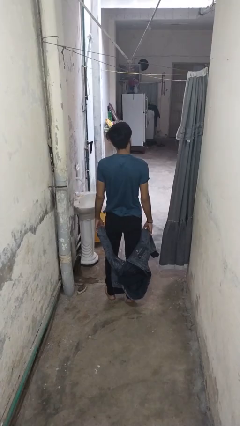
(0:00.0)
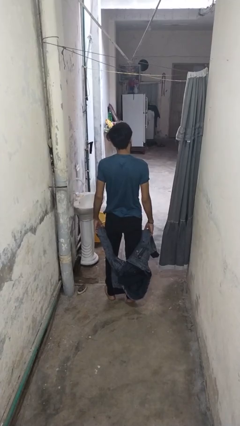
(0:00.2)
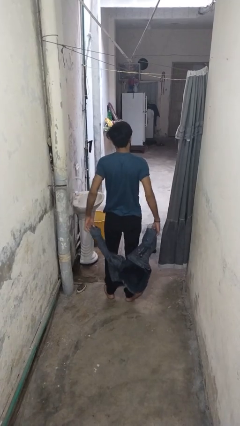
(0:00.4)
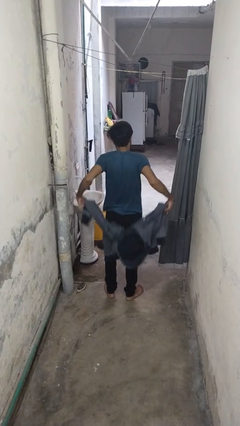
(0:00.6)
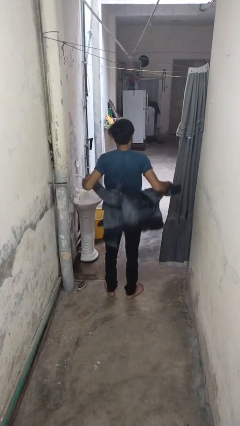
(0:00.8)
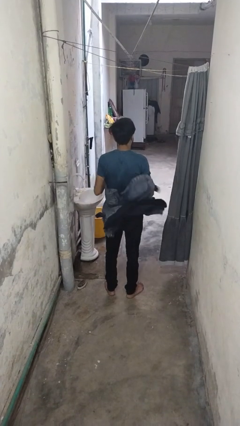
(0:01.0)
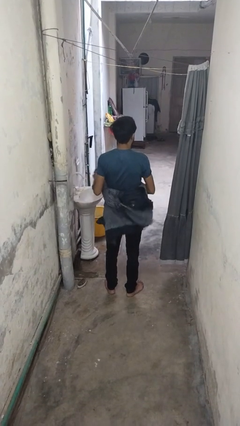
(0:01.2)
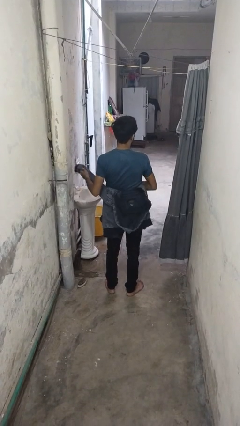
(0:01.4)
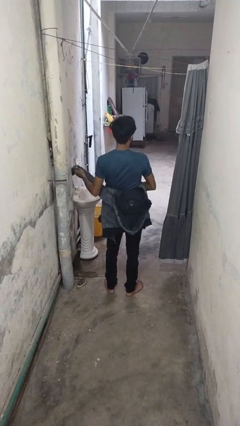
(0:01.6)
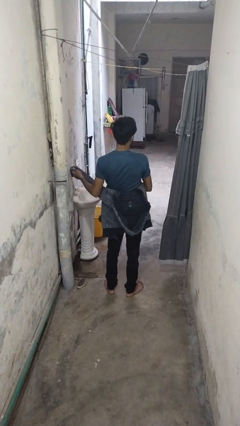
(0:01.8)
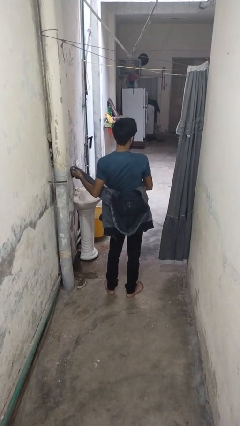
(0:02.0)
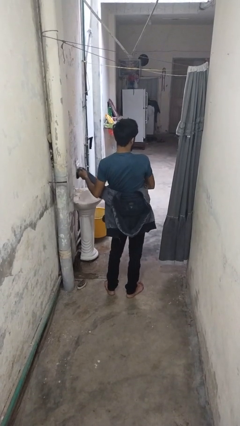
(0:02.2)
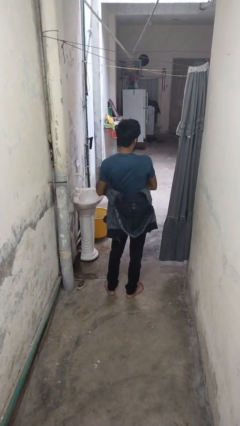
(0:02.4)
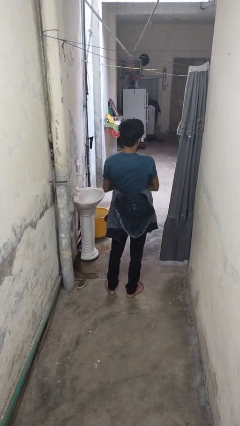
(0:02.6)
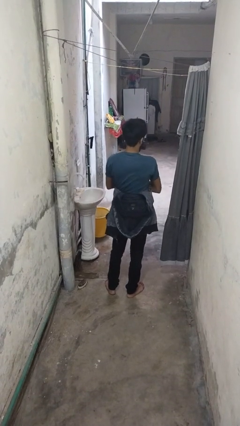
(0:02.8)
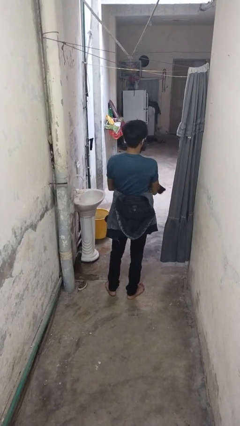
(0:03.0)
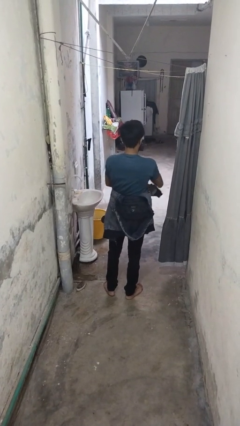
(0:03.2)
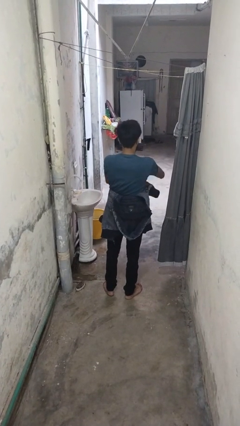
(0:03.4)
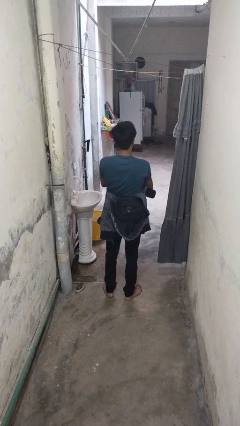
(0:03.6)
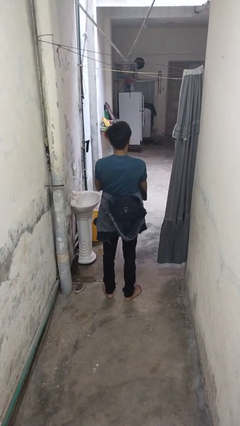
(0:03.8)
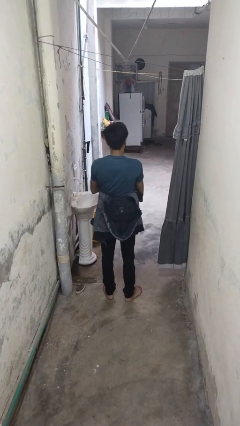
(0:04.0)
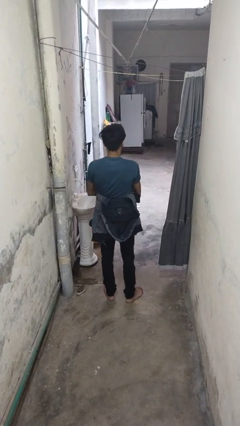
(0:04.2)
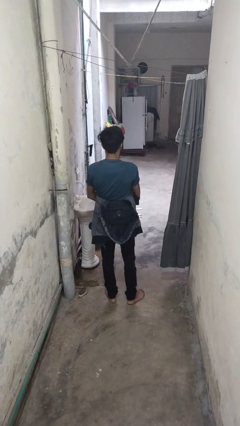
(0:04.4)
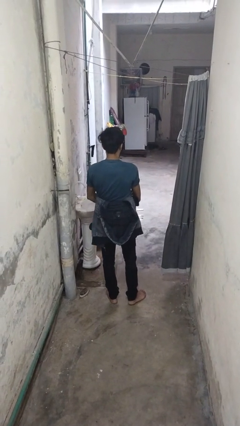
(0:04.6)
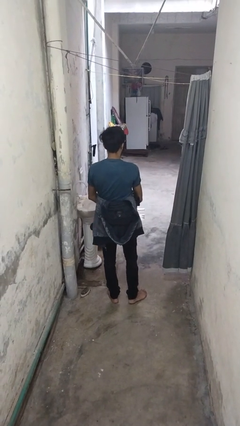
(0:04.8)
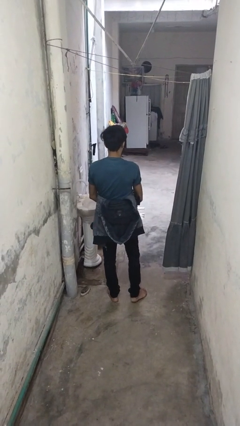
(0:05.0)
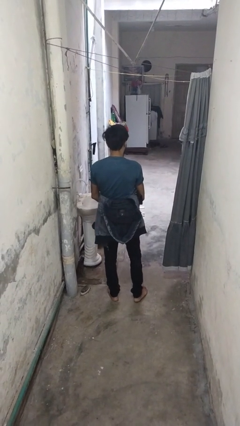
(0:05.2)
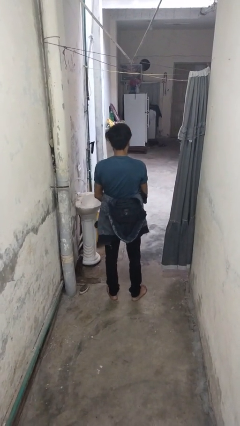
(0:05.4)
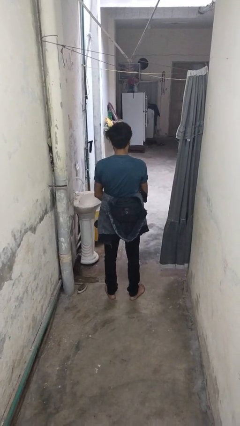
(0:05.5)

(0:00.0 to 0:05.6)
person ties jacket around waist

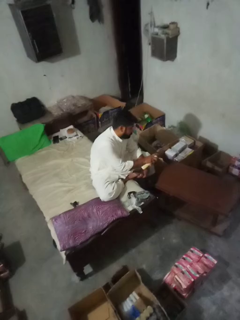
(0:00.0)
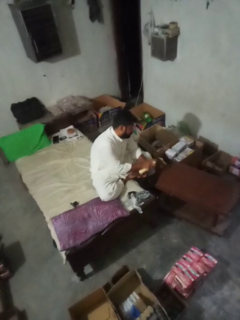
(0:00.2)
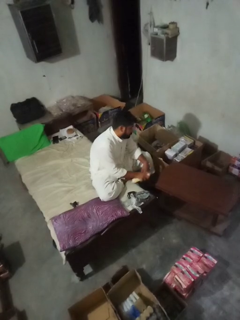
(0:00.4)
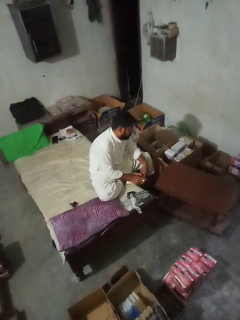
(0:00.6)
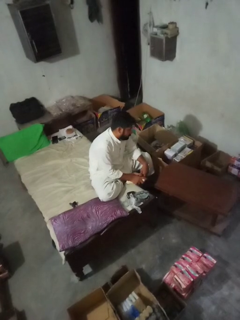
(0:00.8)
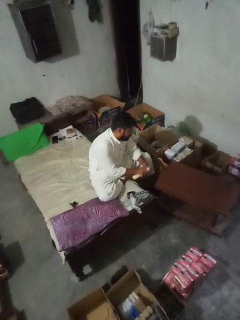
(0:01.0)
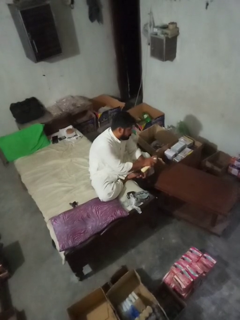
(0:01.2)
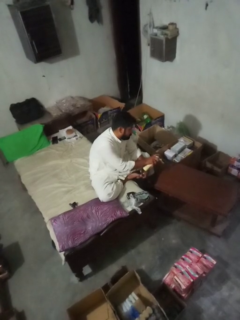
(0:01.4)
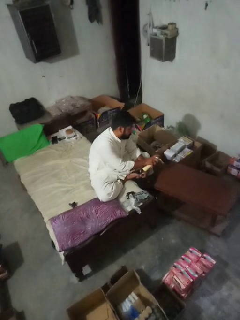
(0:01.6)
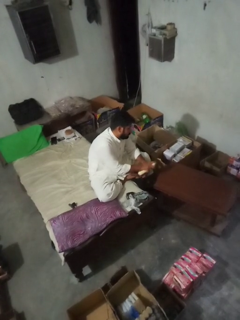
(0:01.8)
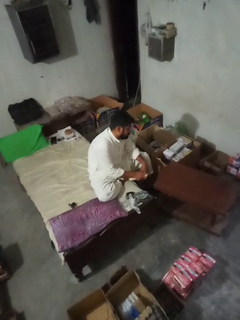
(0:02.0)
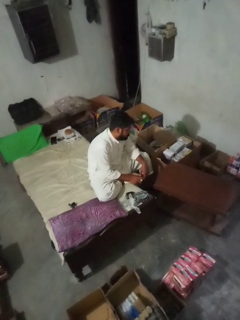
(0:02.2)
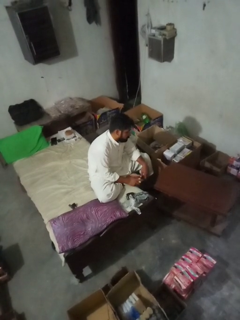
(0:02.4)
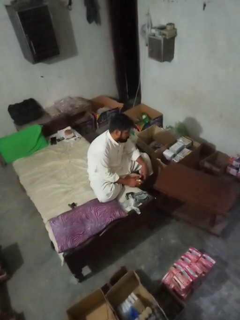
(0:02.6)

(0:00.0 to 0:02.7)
person sprays from bottle

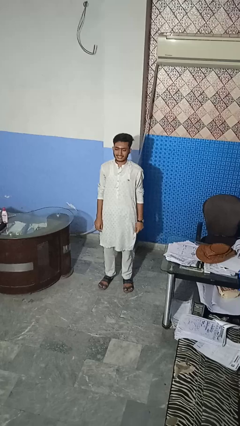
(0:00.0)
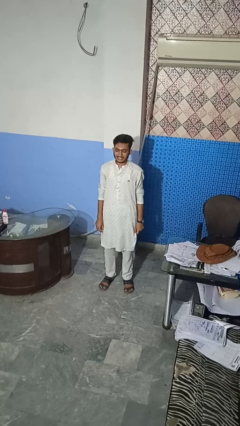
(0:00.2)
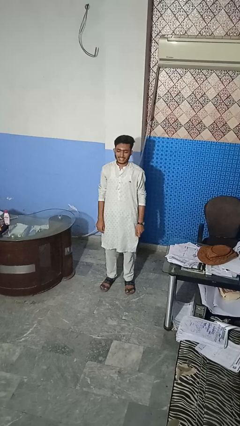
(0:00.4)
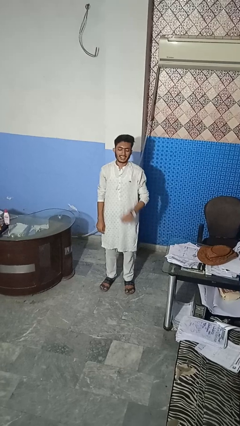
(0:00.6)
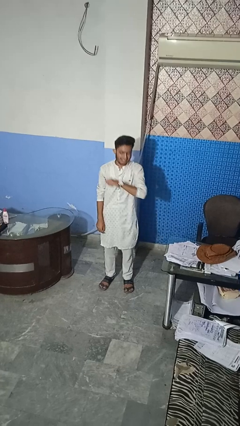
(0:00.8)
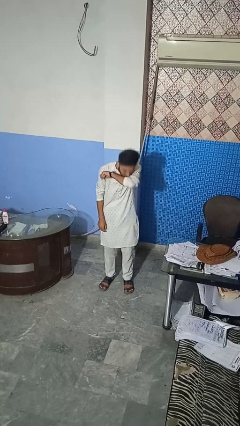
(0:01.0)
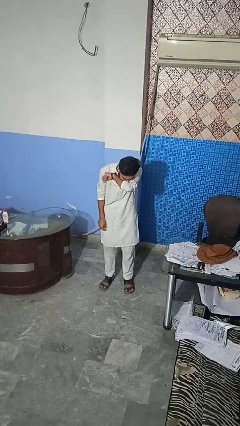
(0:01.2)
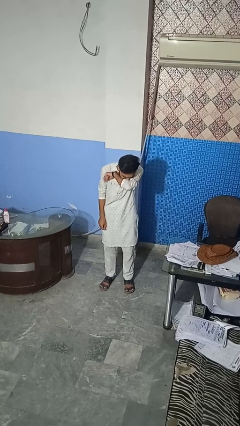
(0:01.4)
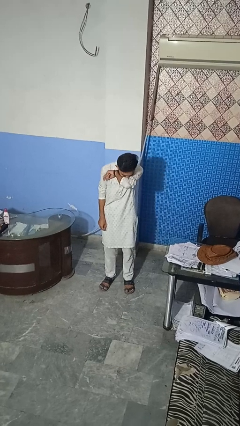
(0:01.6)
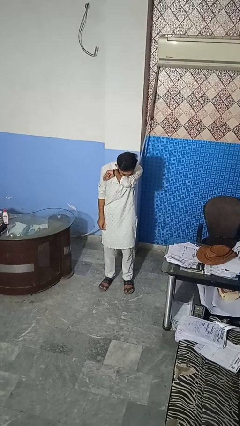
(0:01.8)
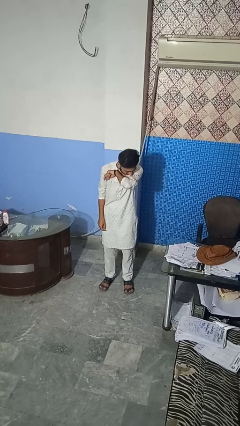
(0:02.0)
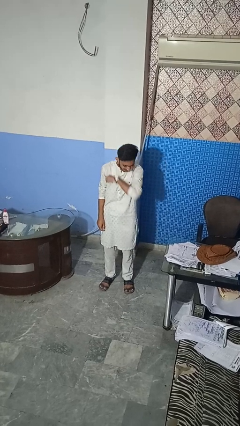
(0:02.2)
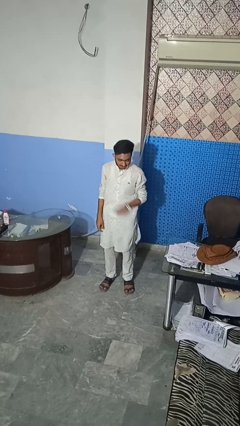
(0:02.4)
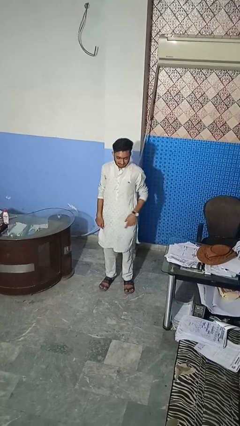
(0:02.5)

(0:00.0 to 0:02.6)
person sneezes into arm

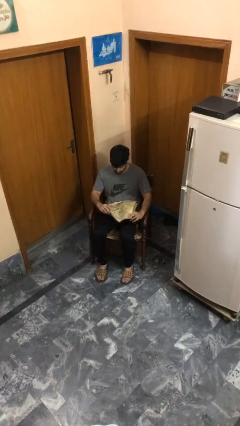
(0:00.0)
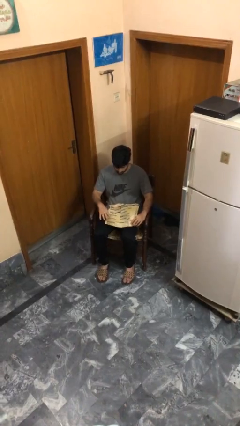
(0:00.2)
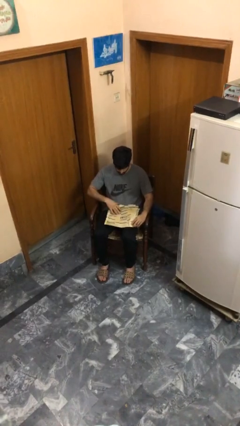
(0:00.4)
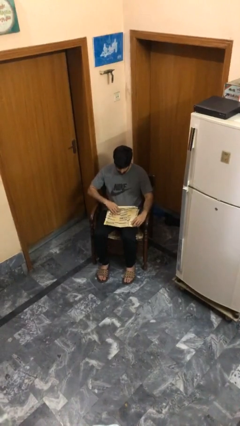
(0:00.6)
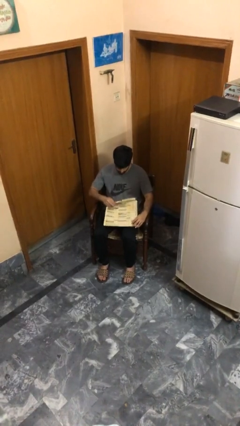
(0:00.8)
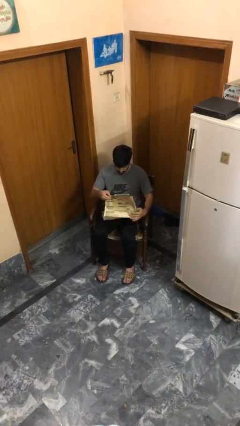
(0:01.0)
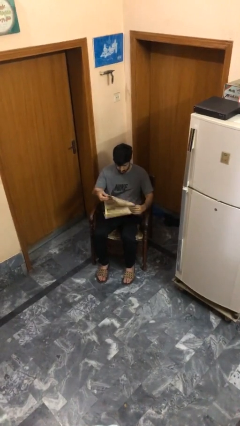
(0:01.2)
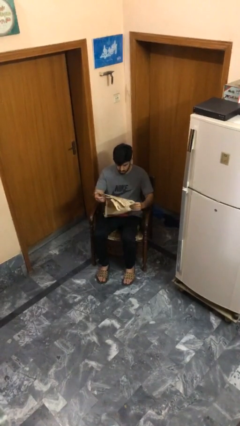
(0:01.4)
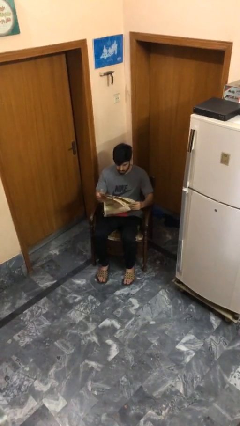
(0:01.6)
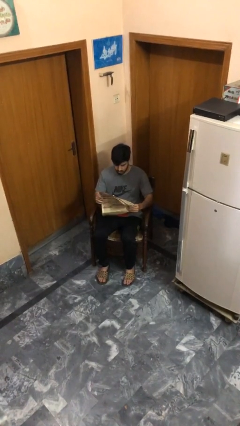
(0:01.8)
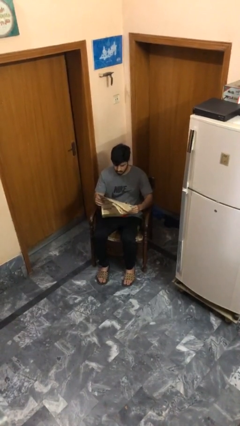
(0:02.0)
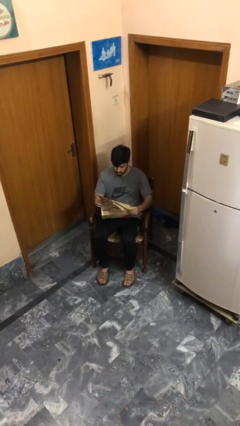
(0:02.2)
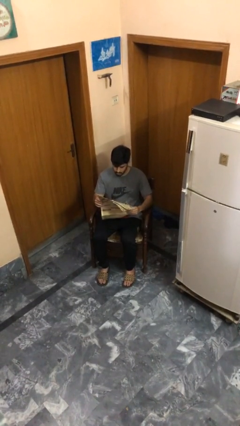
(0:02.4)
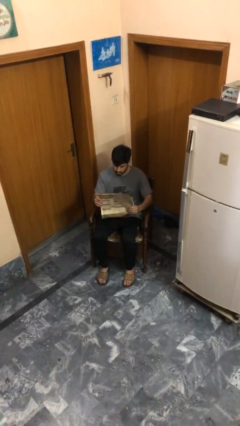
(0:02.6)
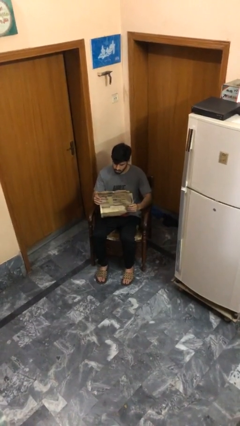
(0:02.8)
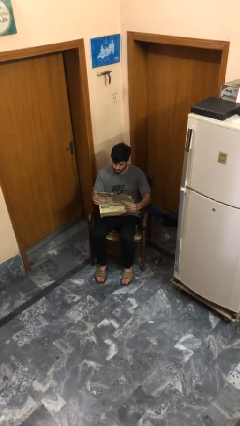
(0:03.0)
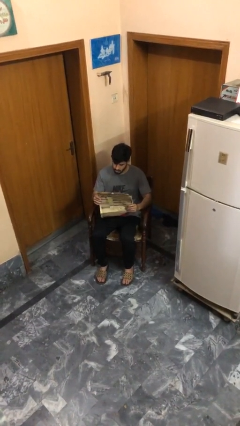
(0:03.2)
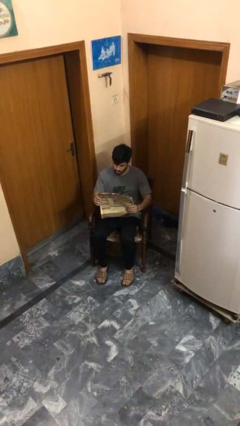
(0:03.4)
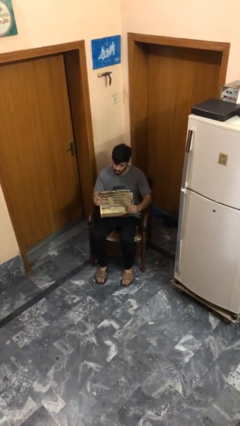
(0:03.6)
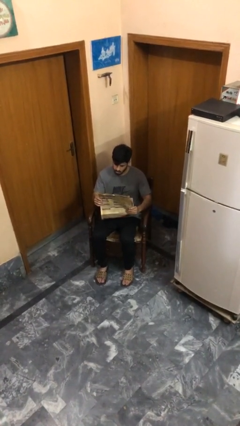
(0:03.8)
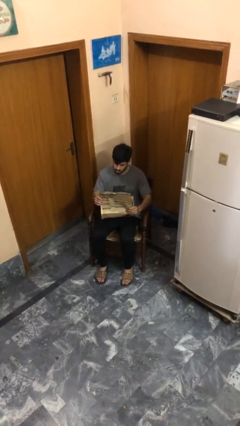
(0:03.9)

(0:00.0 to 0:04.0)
person reads newspaper

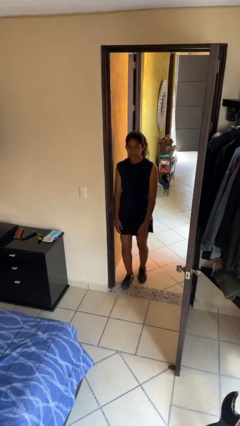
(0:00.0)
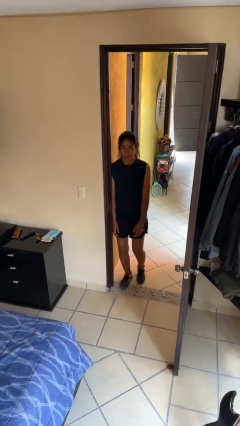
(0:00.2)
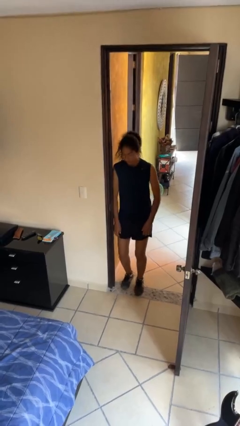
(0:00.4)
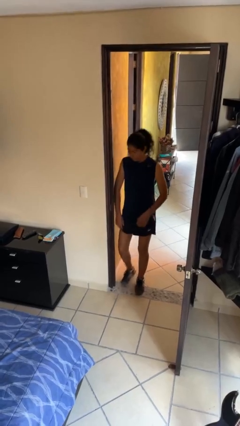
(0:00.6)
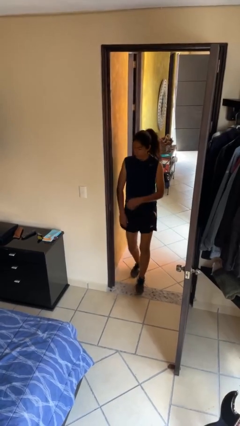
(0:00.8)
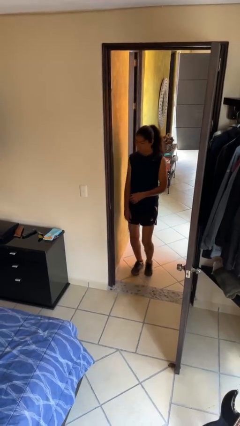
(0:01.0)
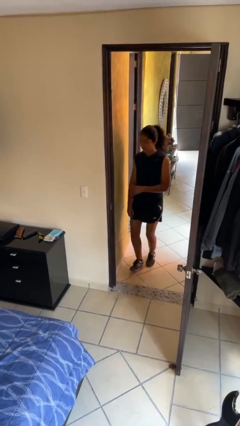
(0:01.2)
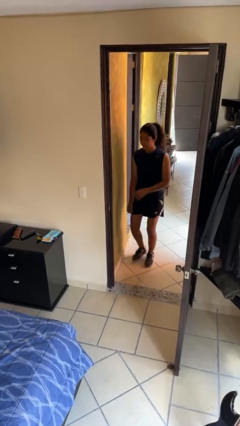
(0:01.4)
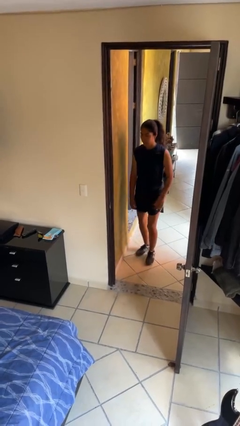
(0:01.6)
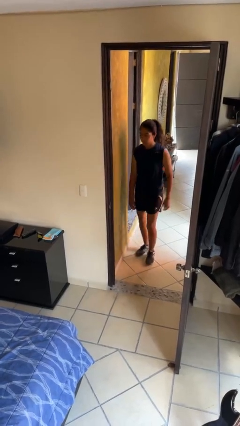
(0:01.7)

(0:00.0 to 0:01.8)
person bumps into wall

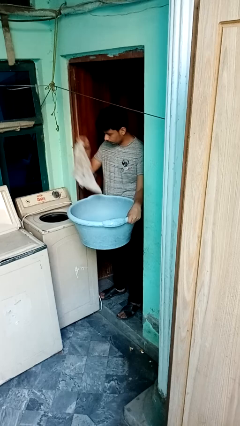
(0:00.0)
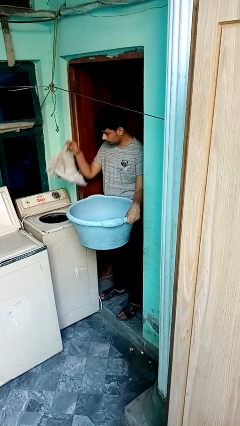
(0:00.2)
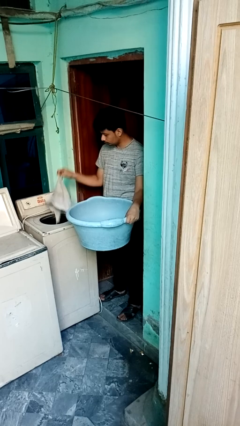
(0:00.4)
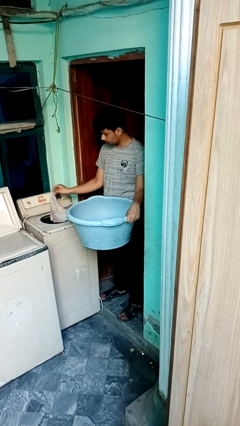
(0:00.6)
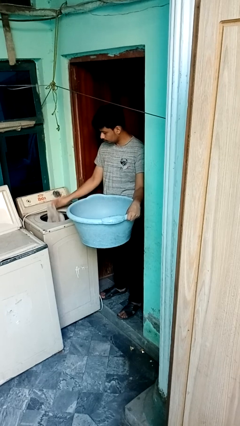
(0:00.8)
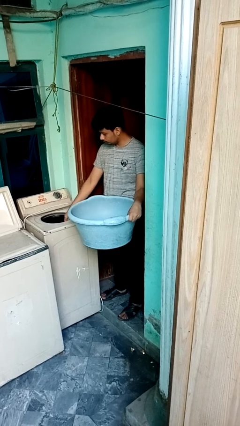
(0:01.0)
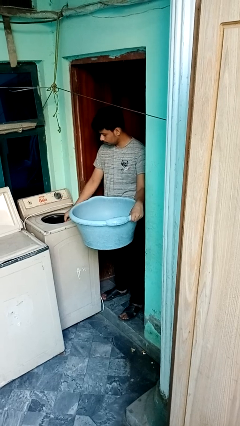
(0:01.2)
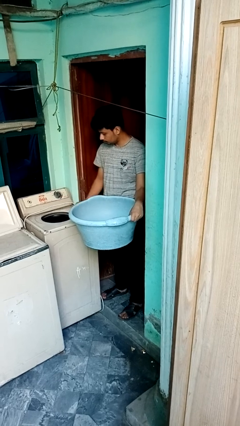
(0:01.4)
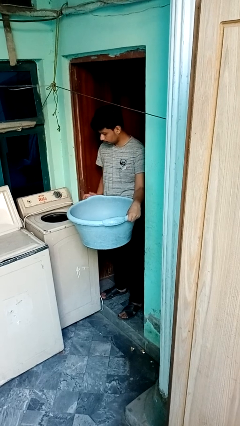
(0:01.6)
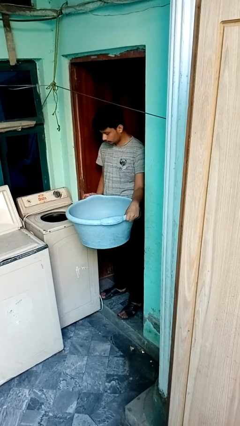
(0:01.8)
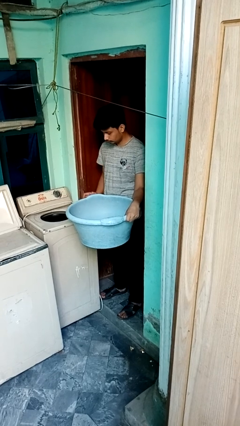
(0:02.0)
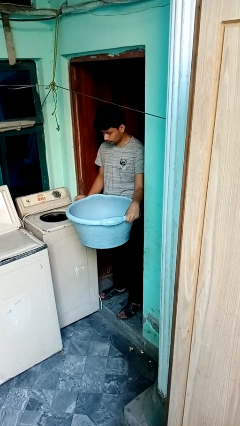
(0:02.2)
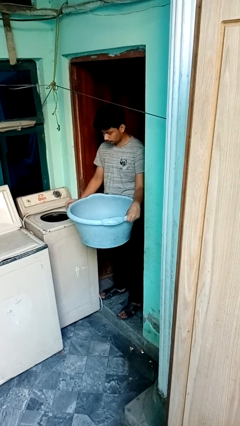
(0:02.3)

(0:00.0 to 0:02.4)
person loads dryer
